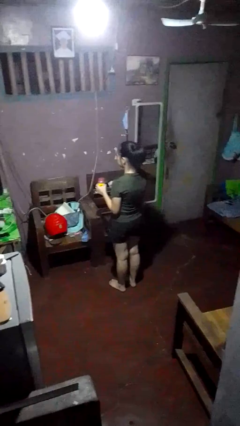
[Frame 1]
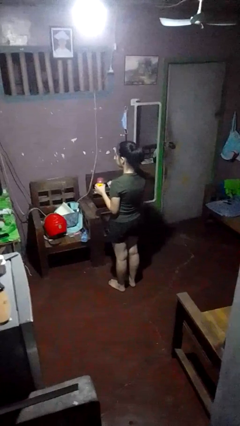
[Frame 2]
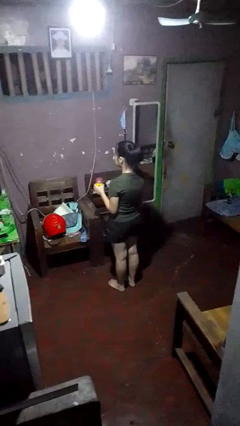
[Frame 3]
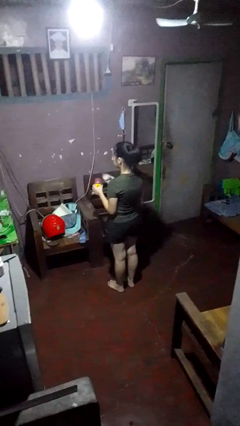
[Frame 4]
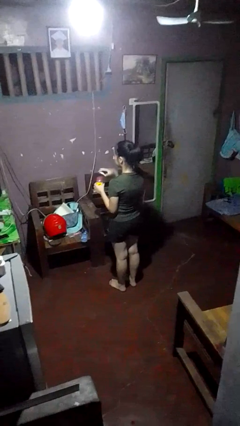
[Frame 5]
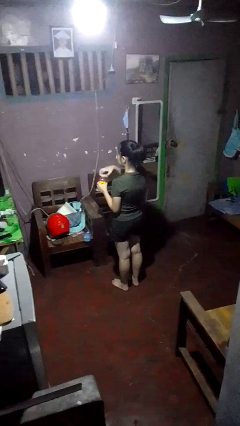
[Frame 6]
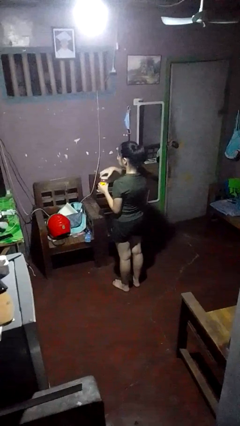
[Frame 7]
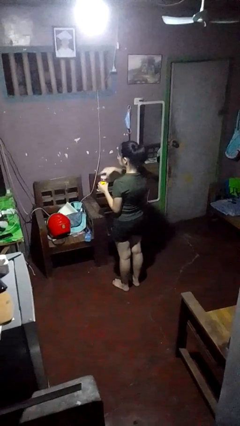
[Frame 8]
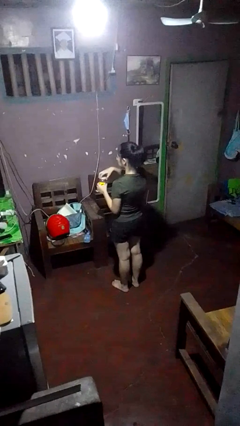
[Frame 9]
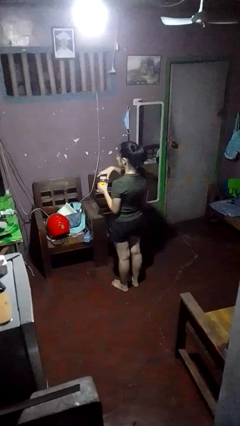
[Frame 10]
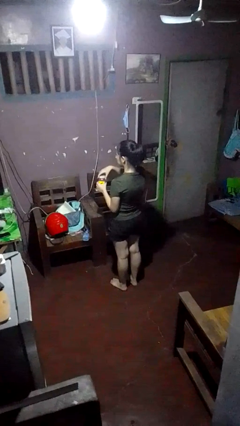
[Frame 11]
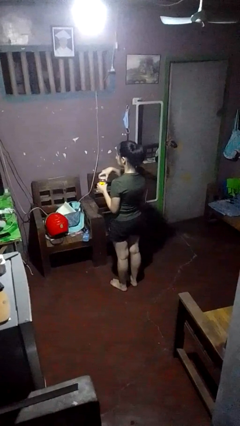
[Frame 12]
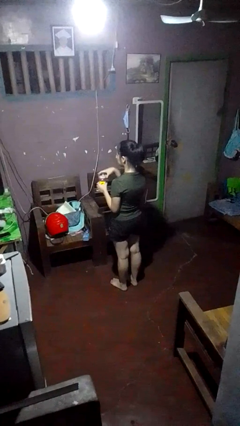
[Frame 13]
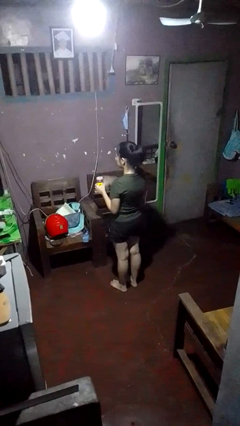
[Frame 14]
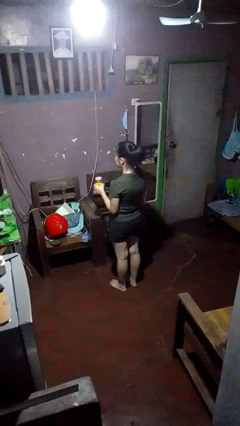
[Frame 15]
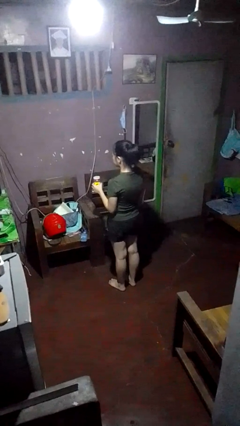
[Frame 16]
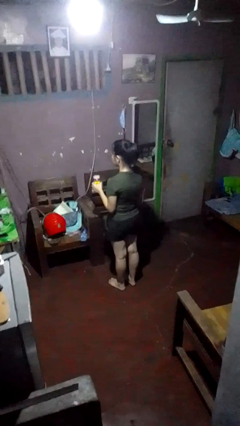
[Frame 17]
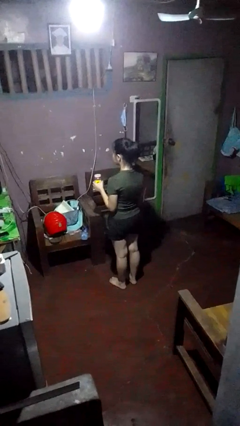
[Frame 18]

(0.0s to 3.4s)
person closes jar

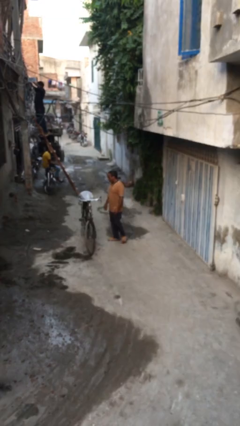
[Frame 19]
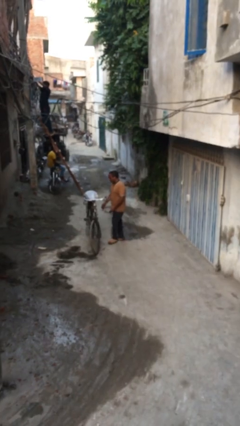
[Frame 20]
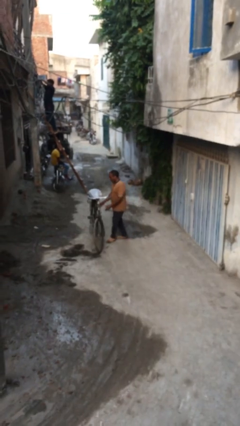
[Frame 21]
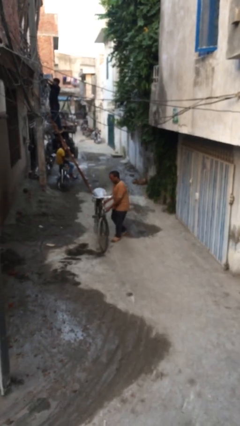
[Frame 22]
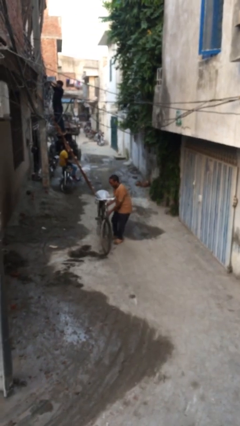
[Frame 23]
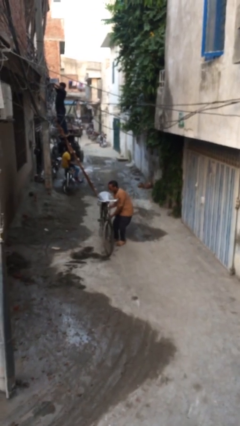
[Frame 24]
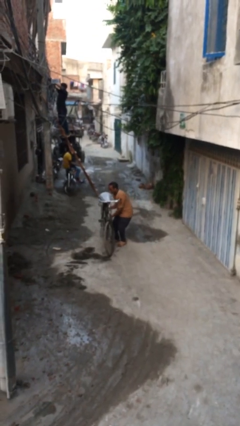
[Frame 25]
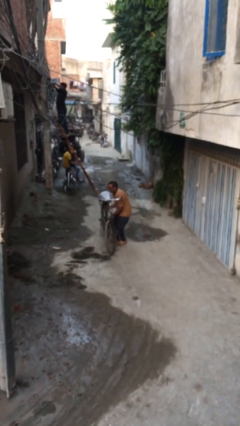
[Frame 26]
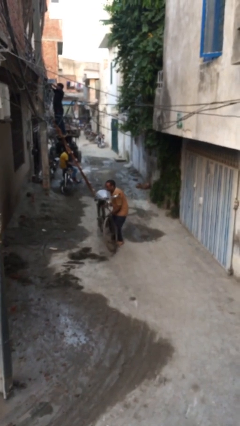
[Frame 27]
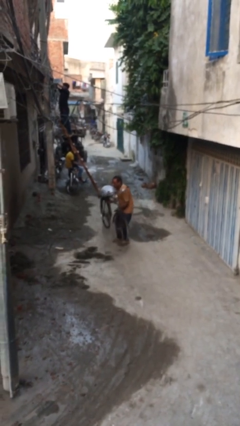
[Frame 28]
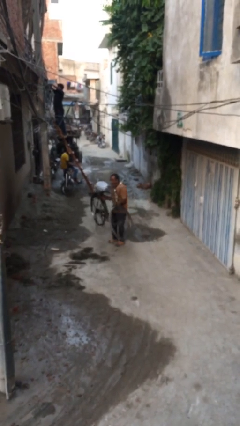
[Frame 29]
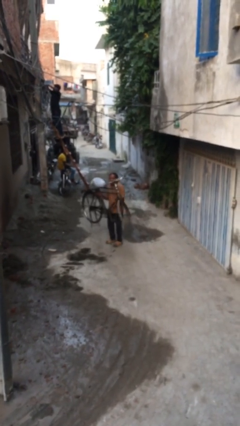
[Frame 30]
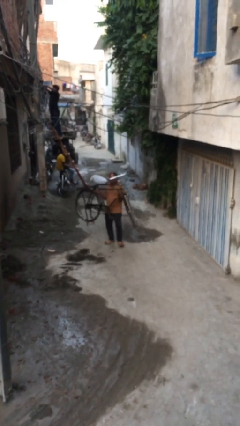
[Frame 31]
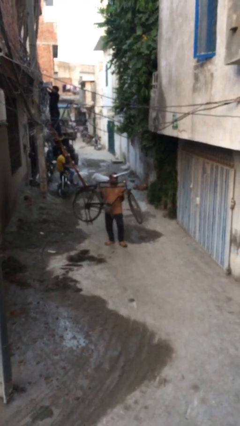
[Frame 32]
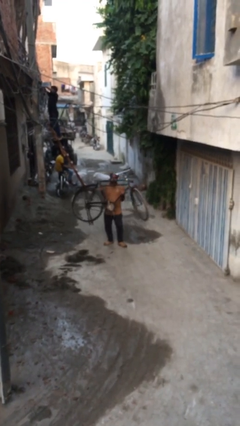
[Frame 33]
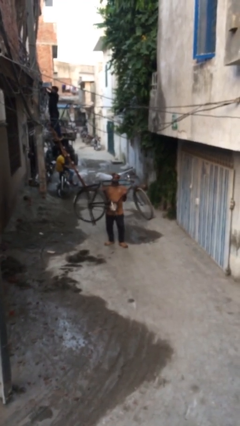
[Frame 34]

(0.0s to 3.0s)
person picks up object from floor

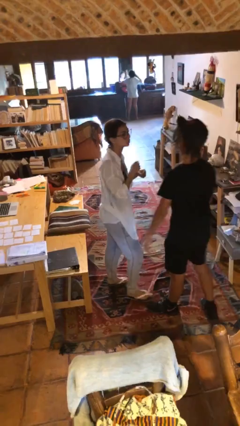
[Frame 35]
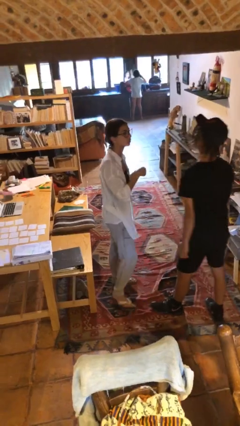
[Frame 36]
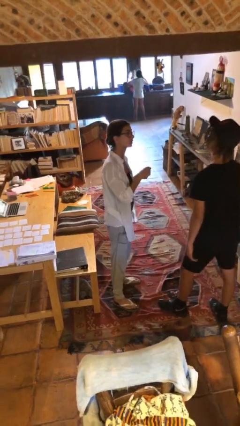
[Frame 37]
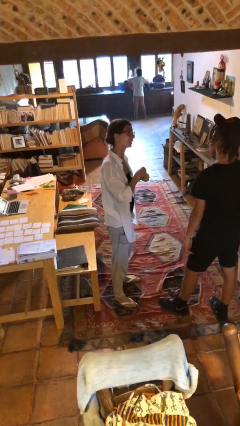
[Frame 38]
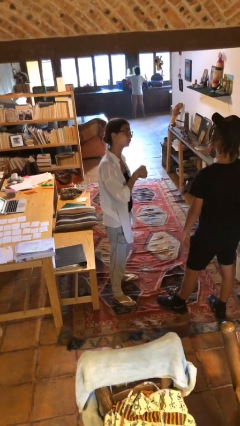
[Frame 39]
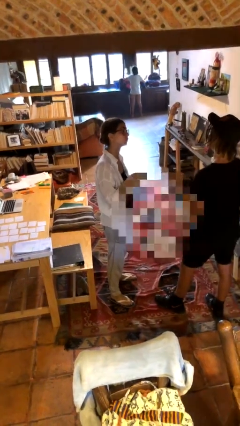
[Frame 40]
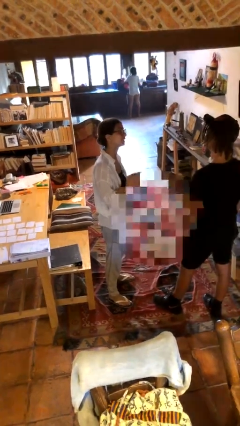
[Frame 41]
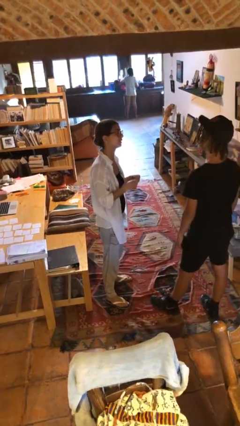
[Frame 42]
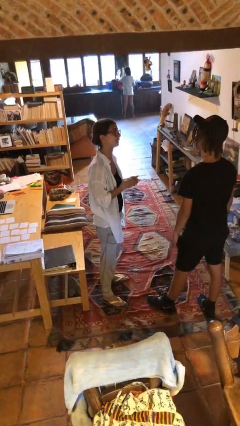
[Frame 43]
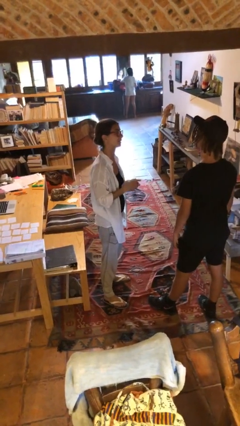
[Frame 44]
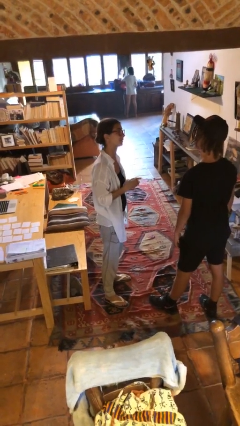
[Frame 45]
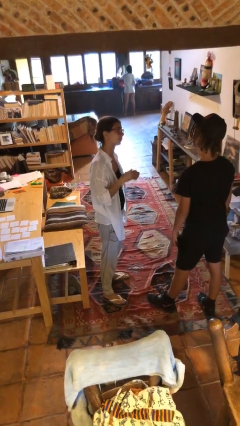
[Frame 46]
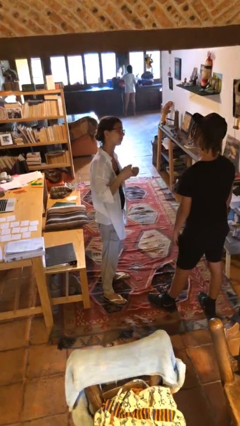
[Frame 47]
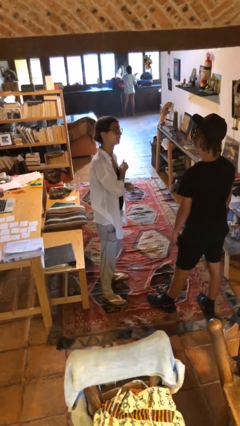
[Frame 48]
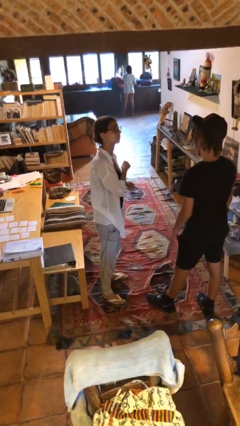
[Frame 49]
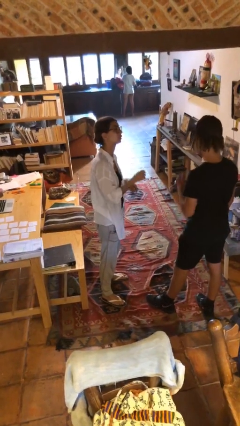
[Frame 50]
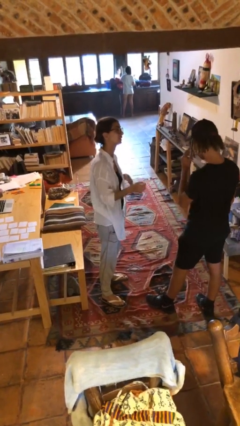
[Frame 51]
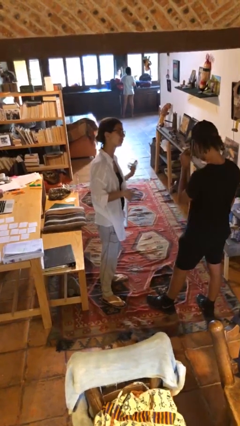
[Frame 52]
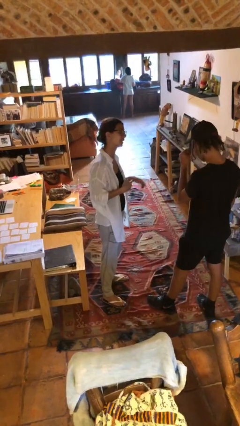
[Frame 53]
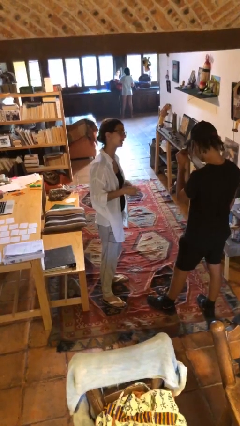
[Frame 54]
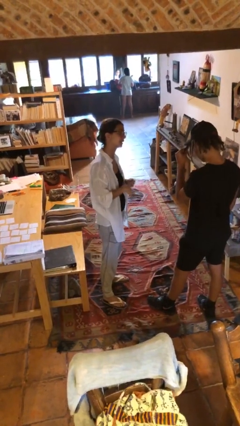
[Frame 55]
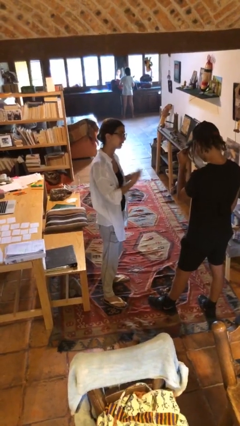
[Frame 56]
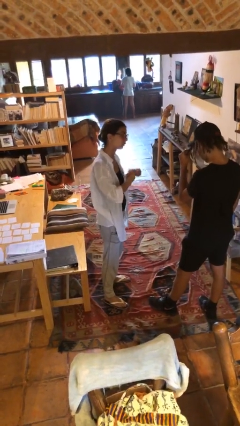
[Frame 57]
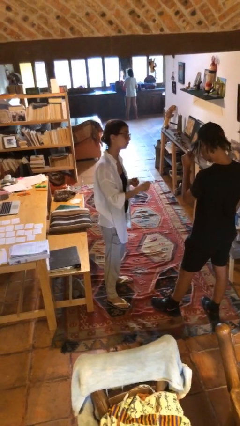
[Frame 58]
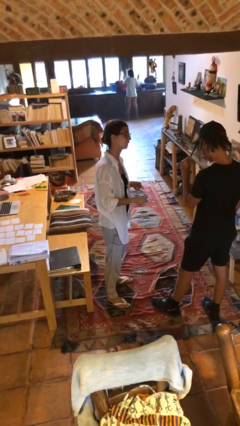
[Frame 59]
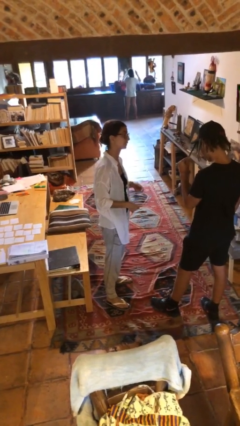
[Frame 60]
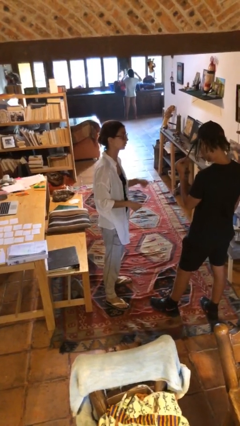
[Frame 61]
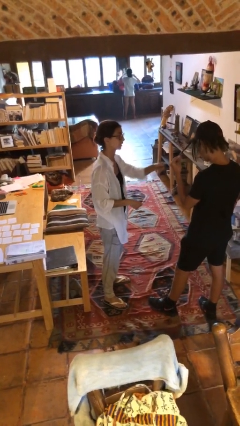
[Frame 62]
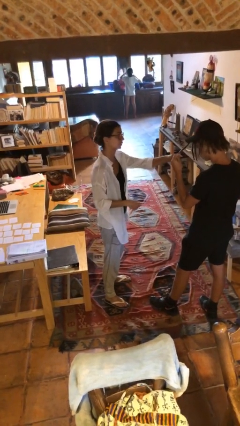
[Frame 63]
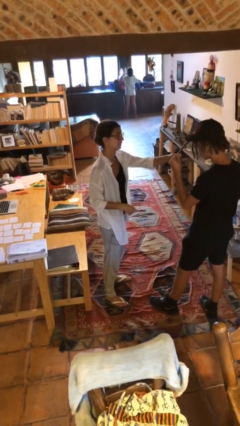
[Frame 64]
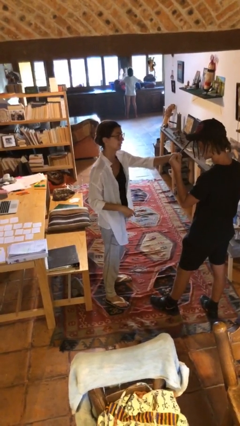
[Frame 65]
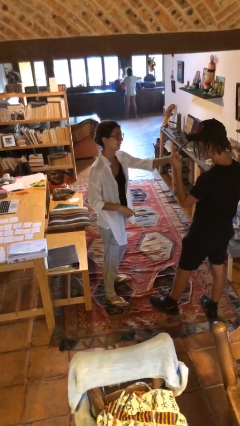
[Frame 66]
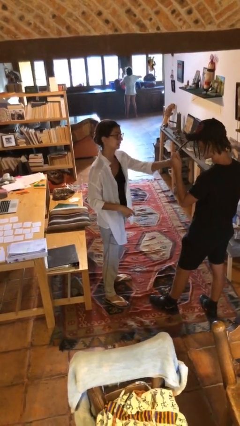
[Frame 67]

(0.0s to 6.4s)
person talks to person

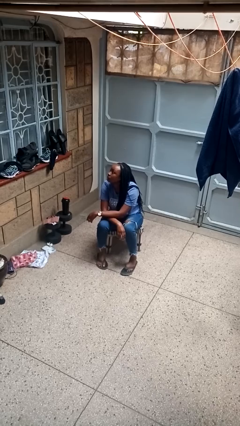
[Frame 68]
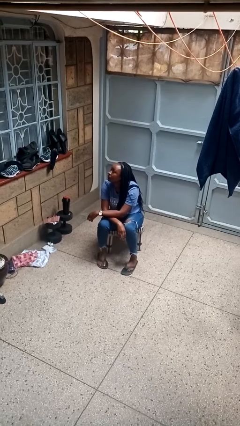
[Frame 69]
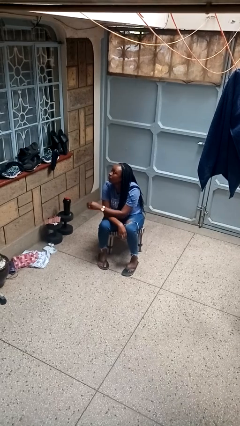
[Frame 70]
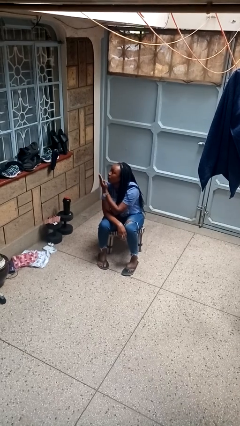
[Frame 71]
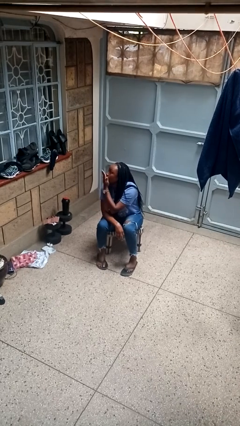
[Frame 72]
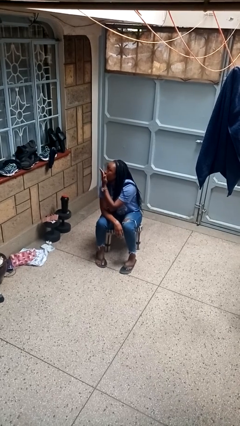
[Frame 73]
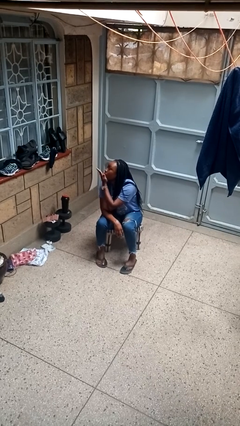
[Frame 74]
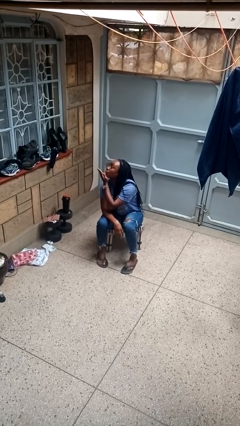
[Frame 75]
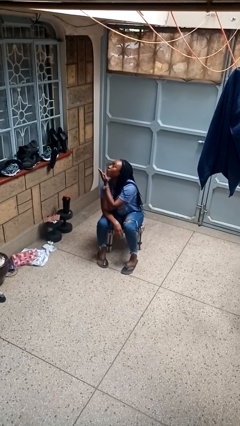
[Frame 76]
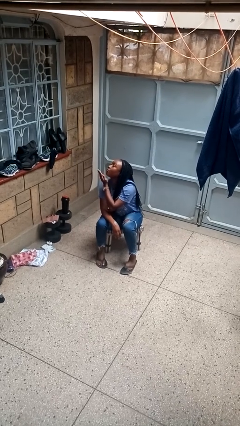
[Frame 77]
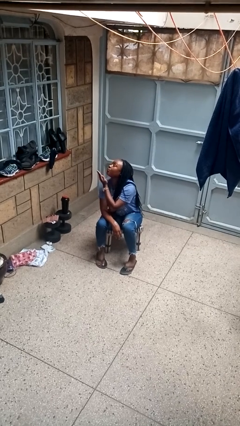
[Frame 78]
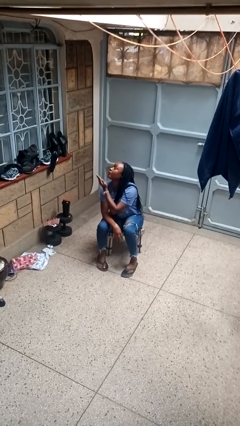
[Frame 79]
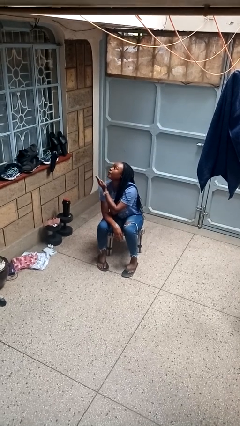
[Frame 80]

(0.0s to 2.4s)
person gestures blow kiss

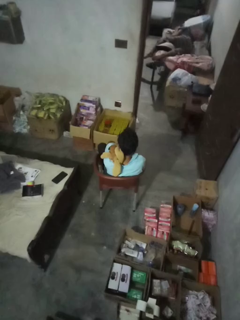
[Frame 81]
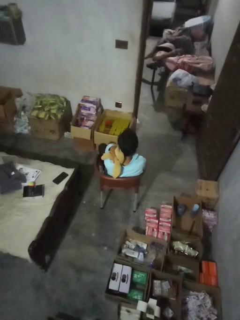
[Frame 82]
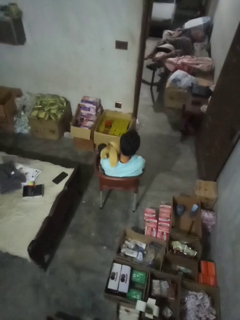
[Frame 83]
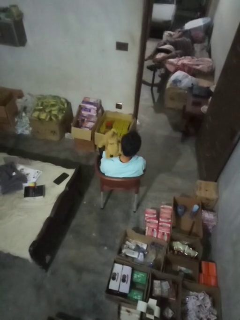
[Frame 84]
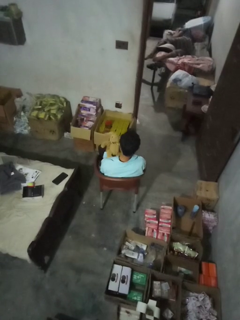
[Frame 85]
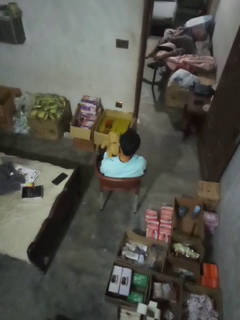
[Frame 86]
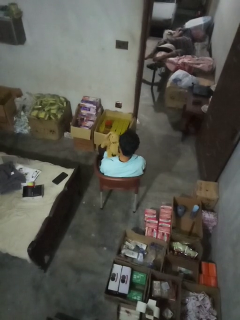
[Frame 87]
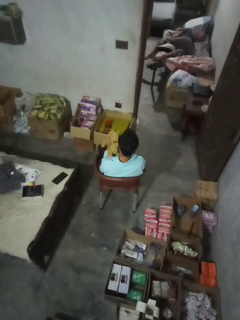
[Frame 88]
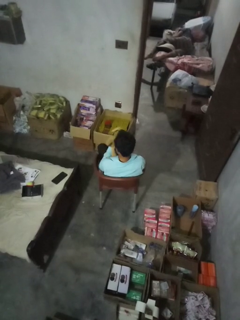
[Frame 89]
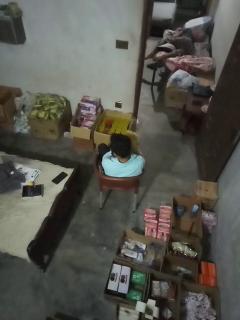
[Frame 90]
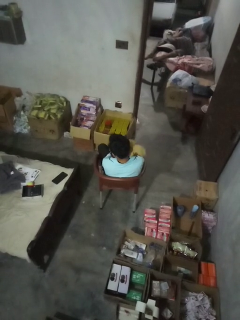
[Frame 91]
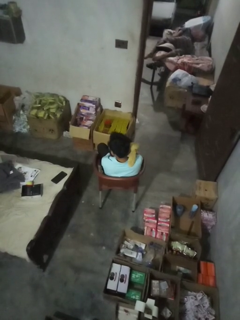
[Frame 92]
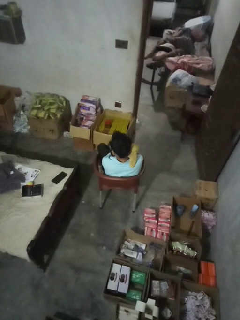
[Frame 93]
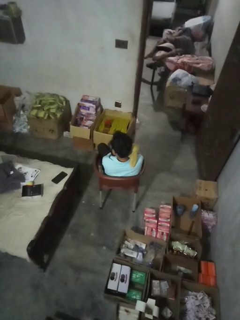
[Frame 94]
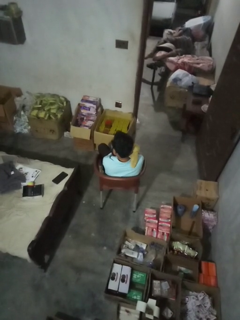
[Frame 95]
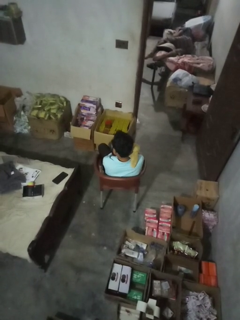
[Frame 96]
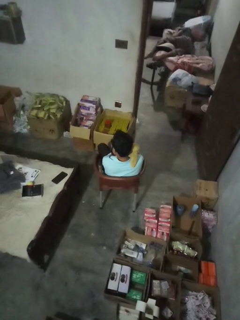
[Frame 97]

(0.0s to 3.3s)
person hugs stuffed animal
